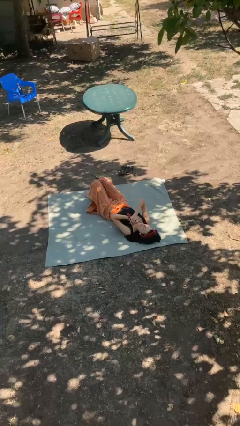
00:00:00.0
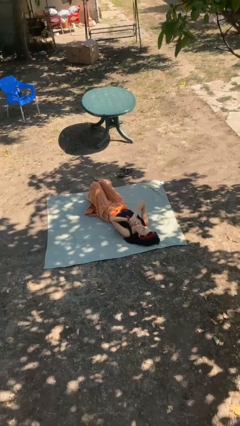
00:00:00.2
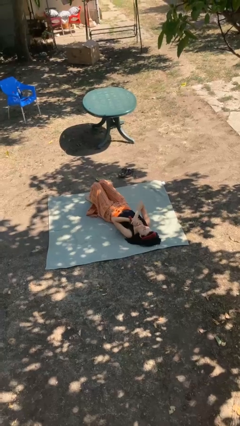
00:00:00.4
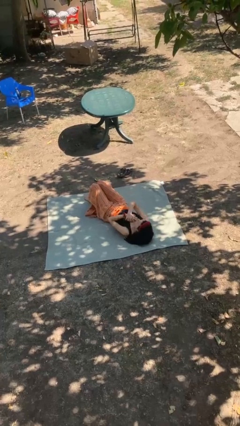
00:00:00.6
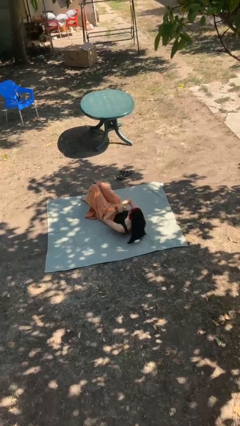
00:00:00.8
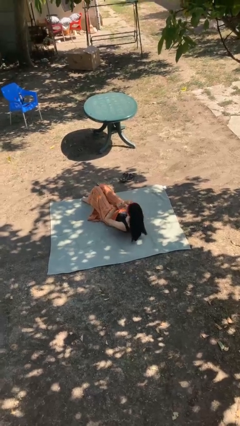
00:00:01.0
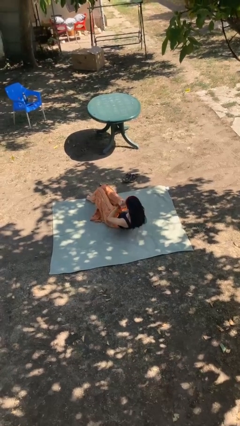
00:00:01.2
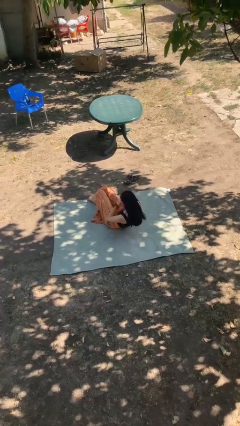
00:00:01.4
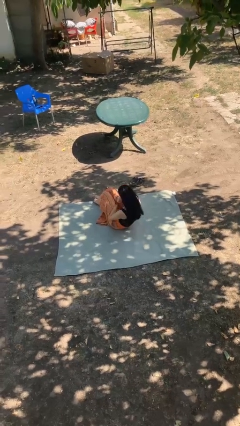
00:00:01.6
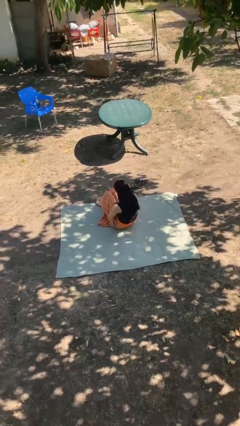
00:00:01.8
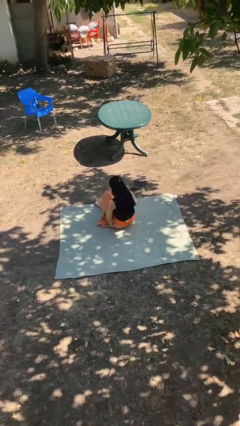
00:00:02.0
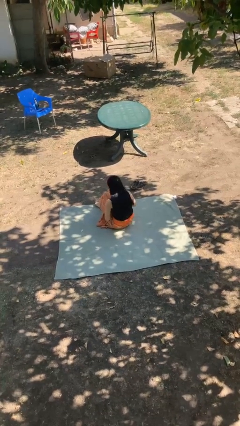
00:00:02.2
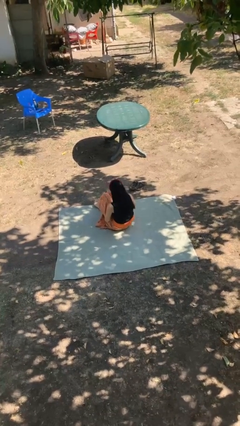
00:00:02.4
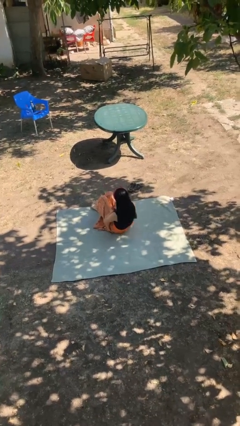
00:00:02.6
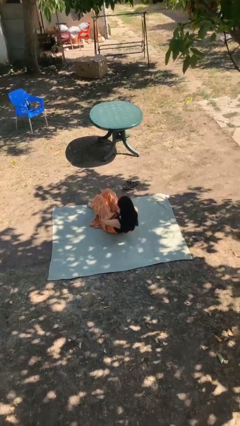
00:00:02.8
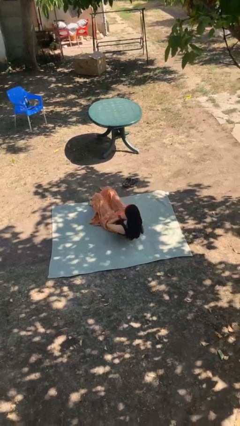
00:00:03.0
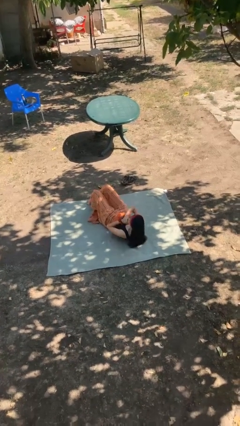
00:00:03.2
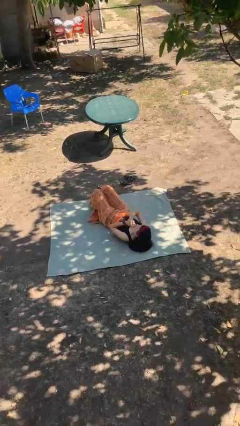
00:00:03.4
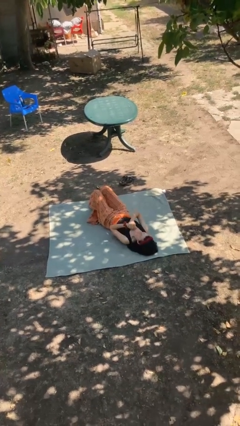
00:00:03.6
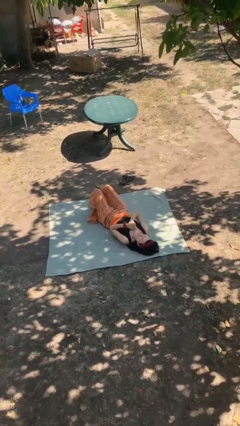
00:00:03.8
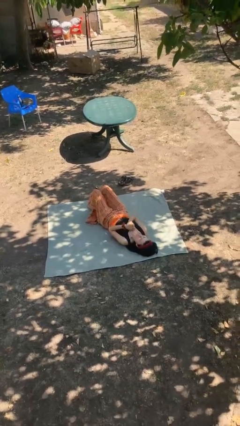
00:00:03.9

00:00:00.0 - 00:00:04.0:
person exercises with situp

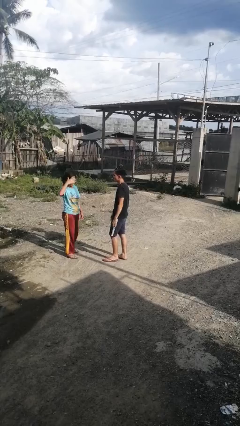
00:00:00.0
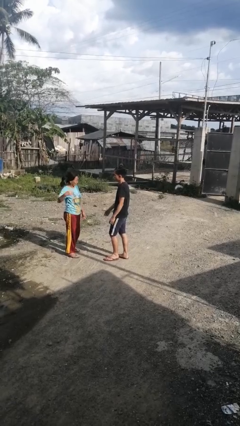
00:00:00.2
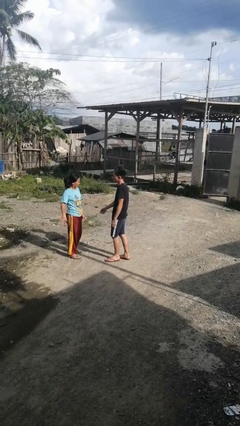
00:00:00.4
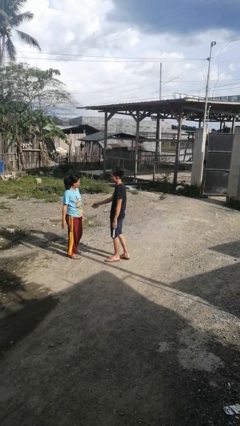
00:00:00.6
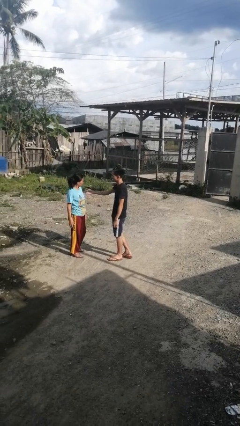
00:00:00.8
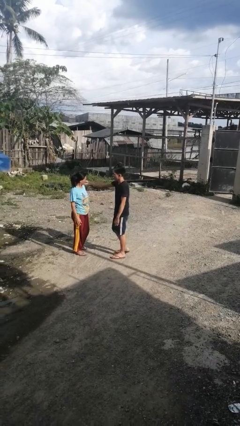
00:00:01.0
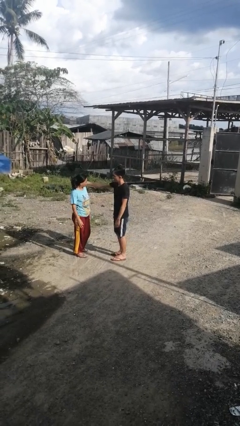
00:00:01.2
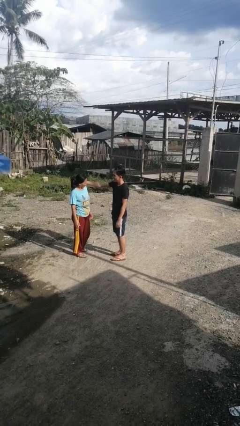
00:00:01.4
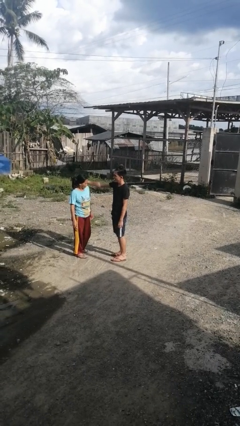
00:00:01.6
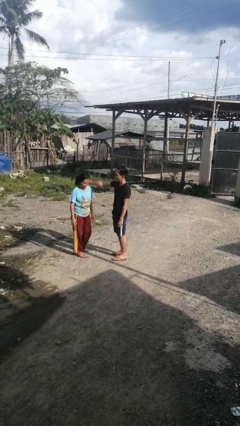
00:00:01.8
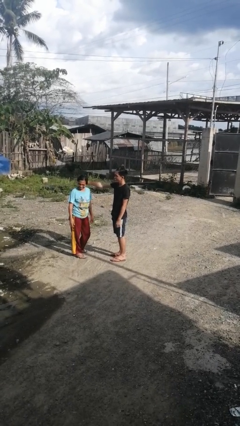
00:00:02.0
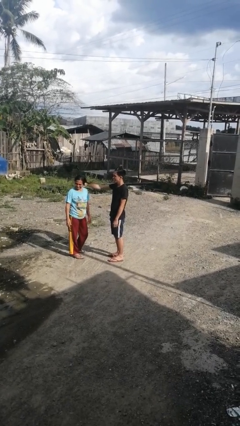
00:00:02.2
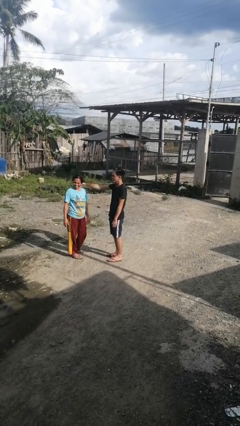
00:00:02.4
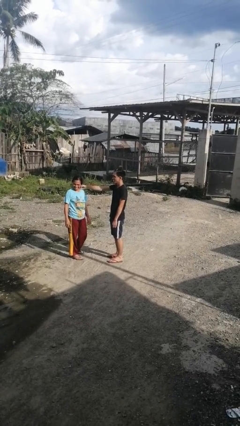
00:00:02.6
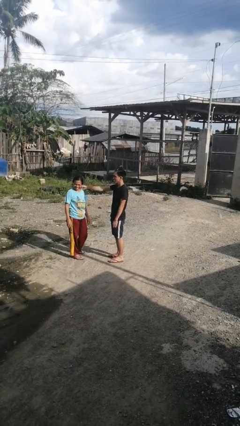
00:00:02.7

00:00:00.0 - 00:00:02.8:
person tickles person

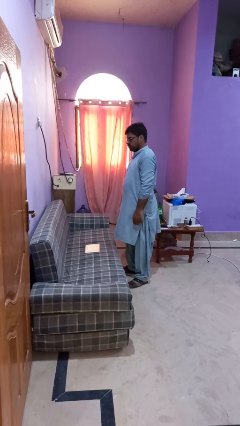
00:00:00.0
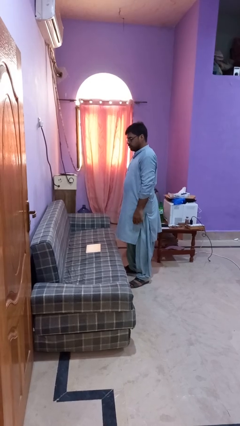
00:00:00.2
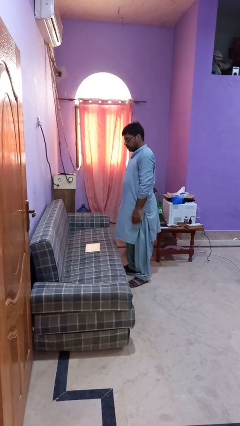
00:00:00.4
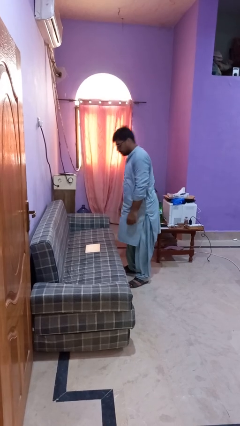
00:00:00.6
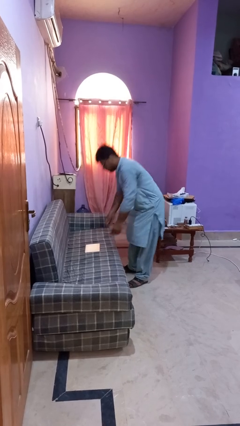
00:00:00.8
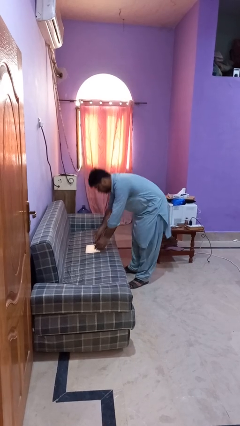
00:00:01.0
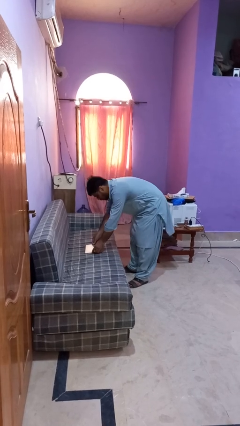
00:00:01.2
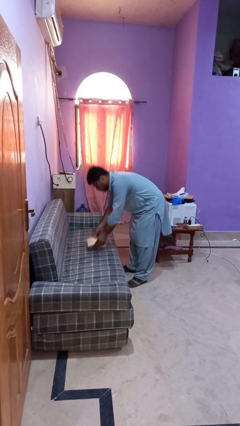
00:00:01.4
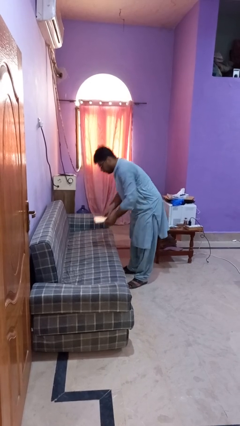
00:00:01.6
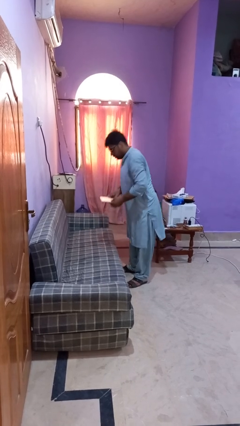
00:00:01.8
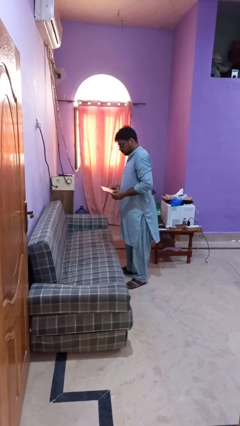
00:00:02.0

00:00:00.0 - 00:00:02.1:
person picks up object from couch

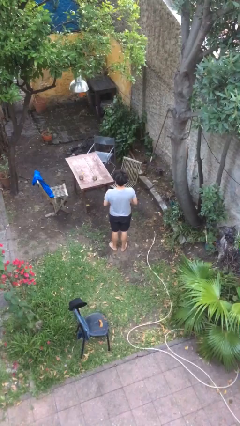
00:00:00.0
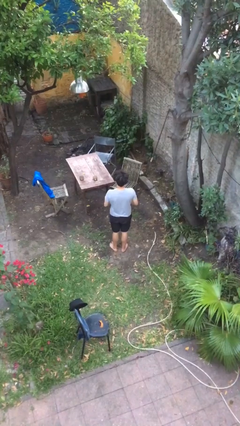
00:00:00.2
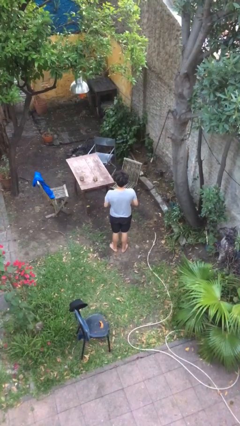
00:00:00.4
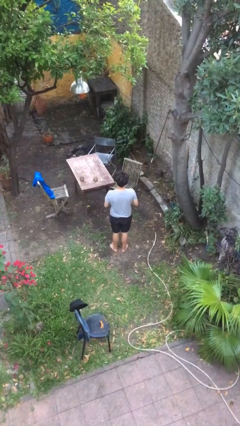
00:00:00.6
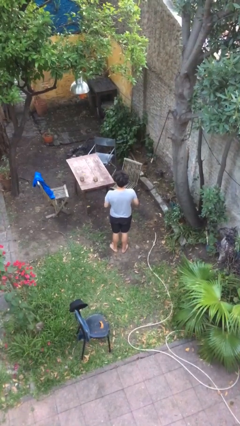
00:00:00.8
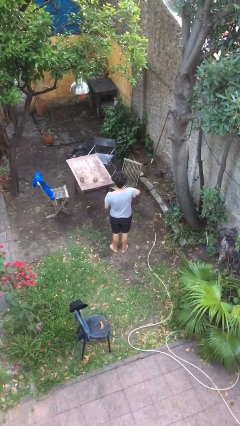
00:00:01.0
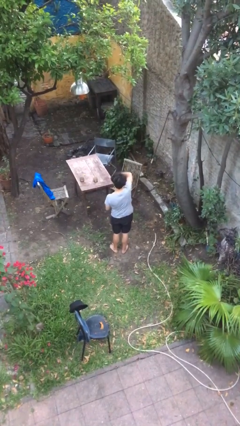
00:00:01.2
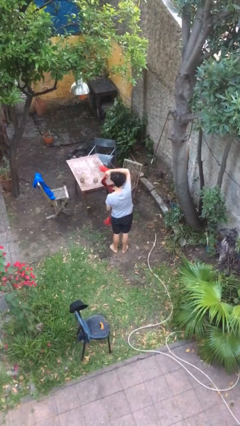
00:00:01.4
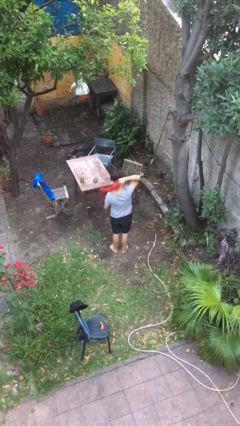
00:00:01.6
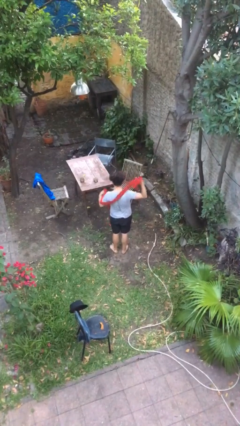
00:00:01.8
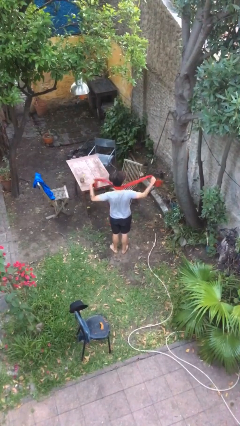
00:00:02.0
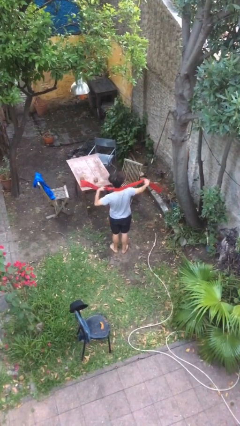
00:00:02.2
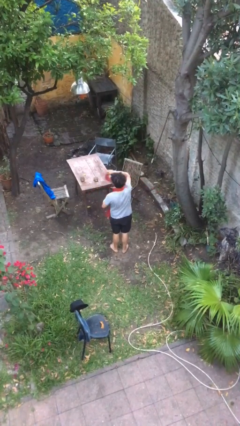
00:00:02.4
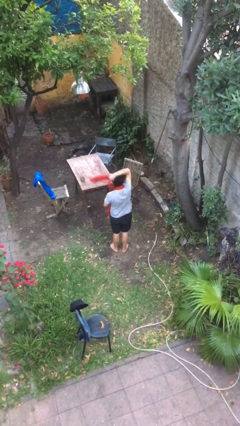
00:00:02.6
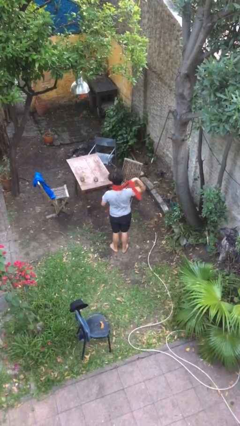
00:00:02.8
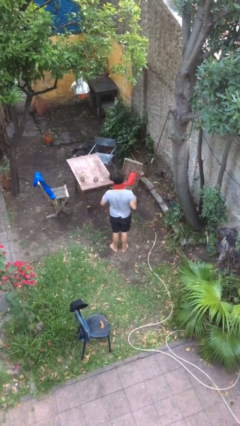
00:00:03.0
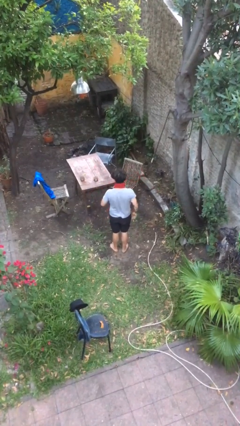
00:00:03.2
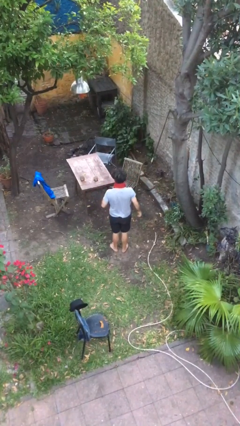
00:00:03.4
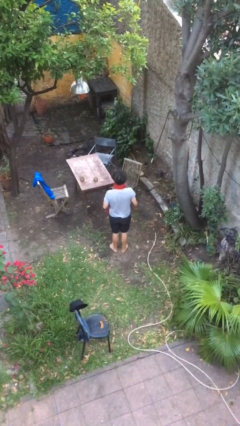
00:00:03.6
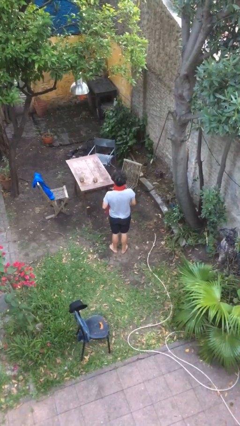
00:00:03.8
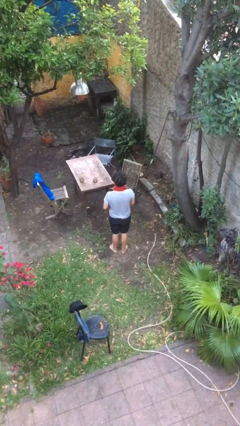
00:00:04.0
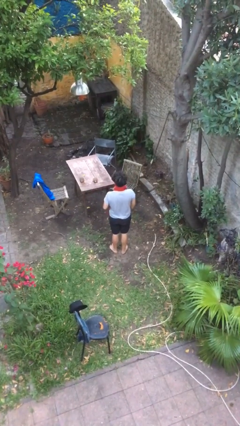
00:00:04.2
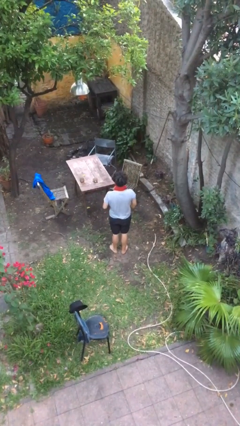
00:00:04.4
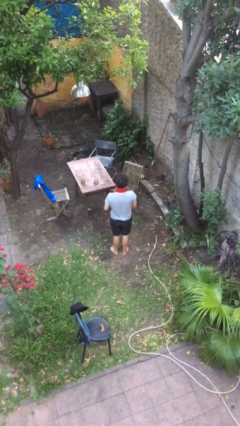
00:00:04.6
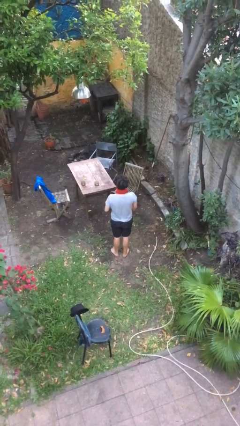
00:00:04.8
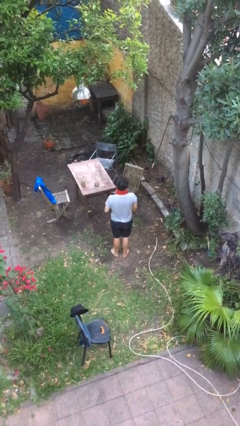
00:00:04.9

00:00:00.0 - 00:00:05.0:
person puts on scarf

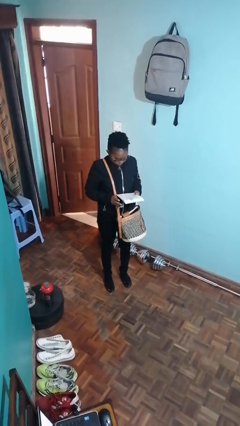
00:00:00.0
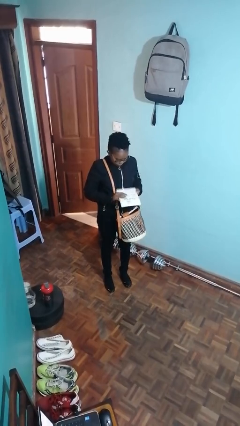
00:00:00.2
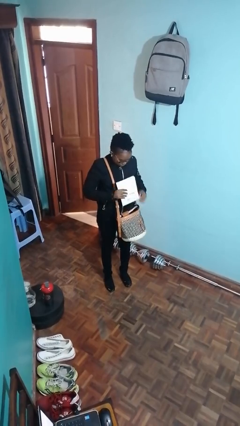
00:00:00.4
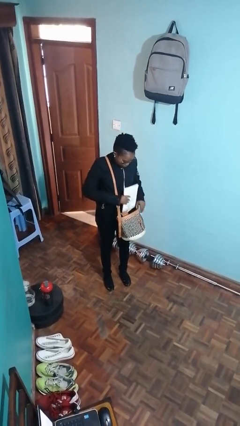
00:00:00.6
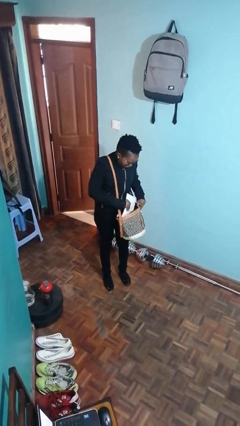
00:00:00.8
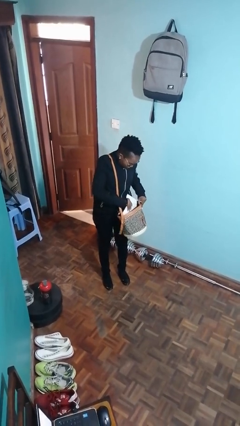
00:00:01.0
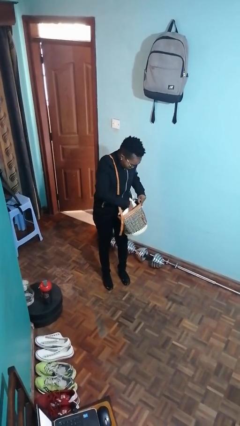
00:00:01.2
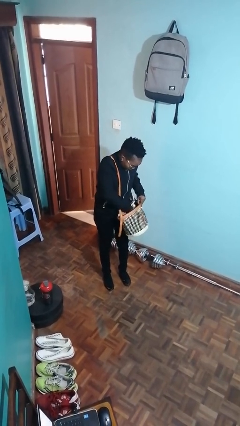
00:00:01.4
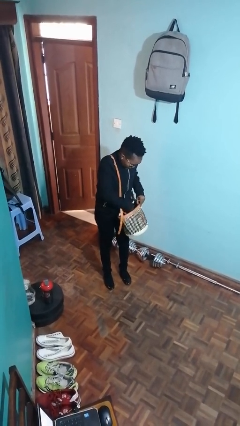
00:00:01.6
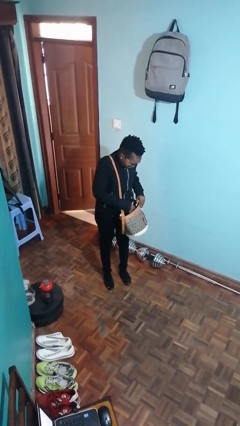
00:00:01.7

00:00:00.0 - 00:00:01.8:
person puts object into purse

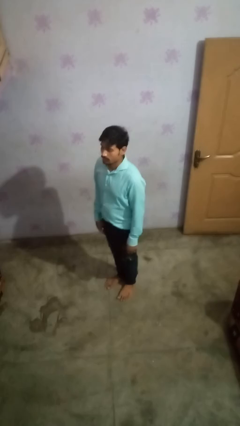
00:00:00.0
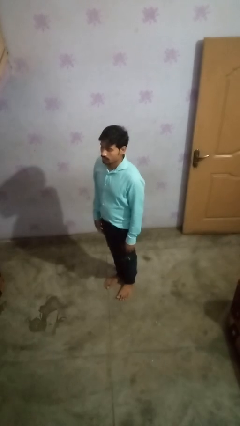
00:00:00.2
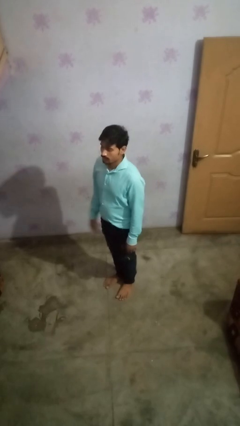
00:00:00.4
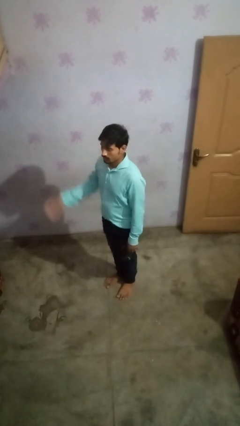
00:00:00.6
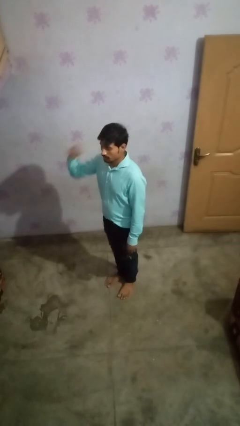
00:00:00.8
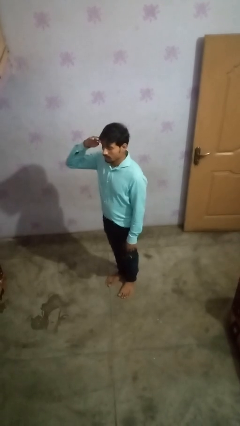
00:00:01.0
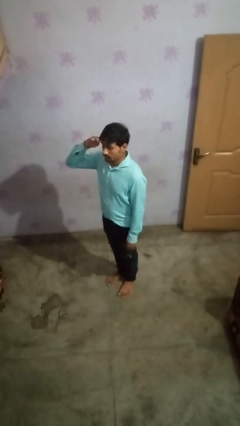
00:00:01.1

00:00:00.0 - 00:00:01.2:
person salutes

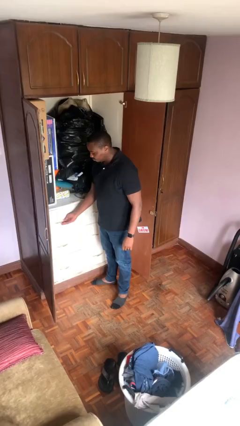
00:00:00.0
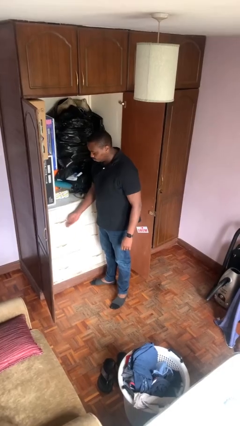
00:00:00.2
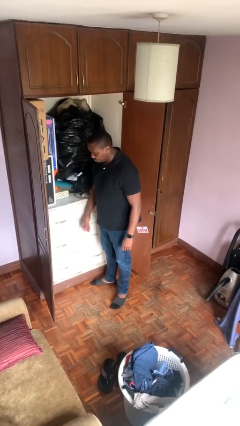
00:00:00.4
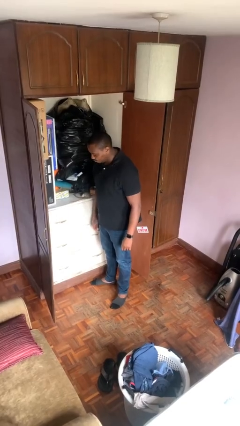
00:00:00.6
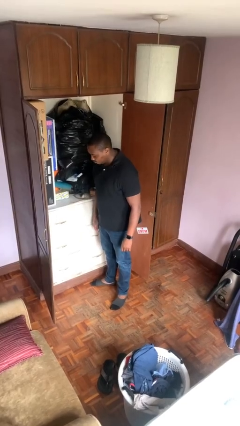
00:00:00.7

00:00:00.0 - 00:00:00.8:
person closes dresser drawer
